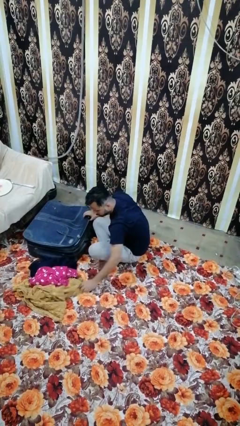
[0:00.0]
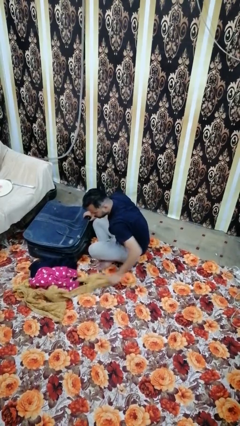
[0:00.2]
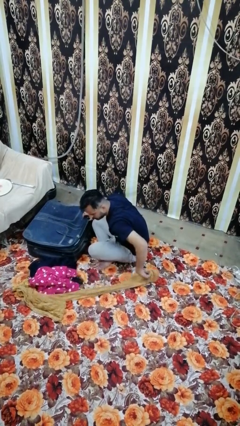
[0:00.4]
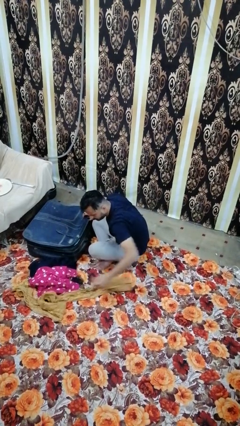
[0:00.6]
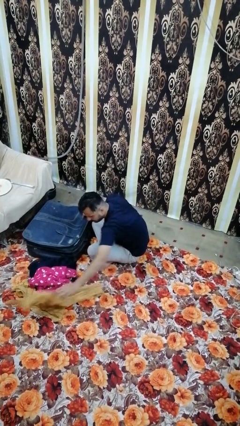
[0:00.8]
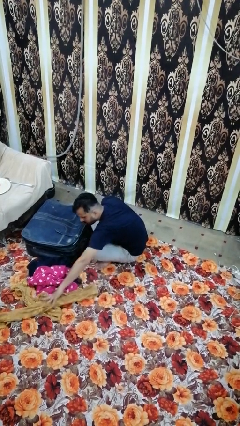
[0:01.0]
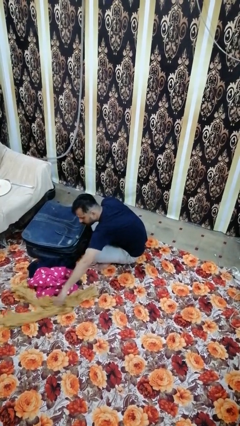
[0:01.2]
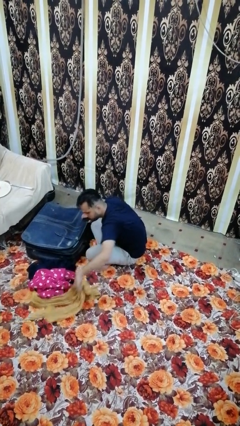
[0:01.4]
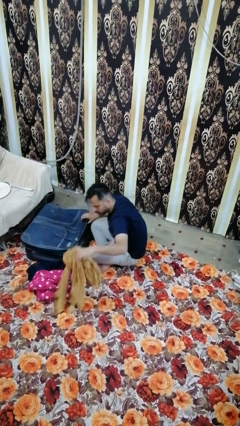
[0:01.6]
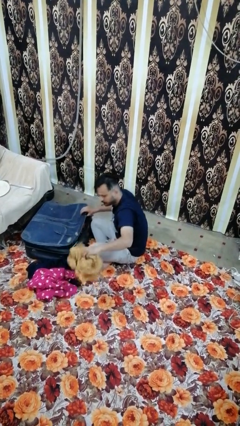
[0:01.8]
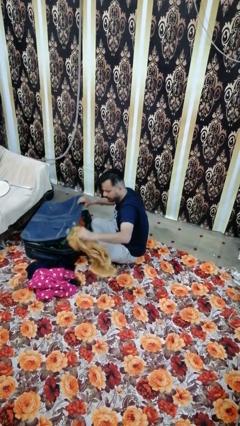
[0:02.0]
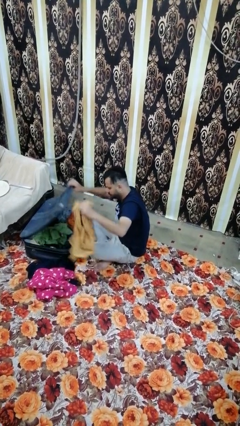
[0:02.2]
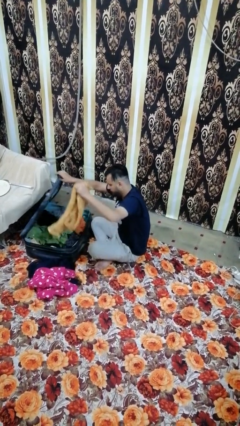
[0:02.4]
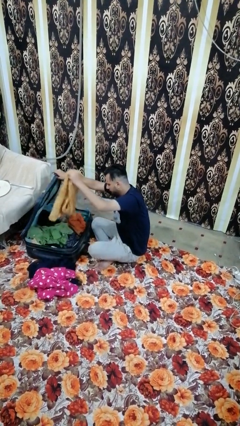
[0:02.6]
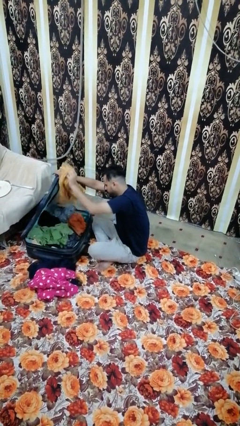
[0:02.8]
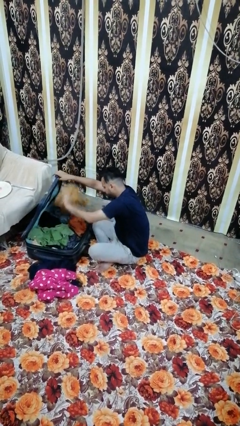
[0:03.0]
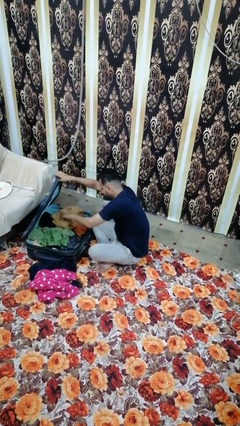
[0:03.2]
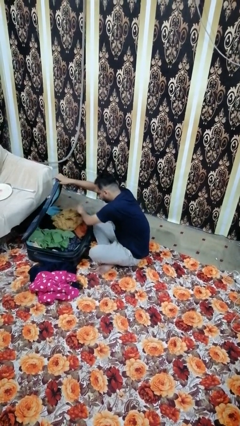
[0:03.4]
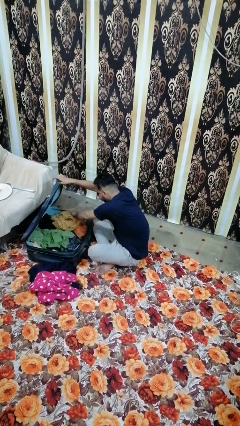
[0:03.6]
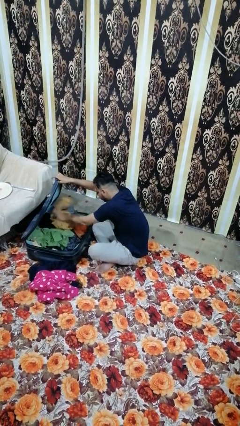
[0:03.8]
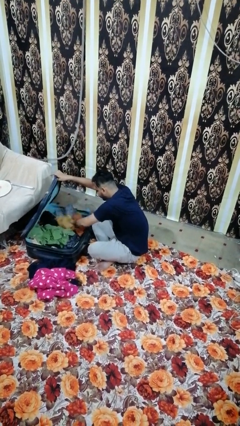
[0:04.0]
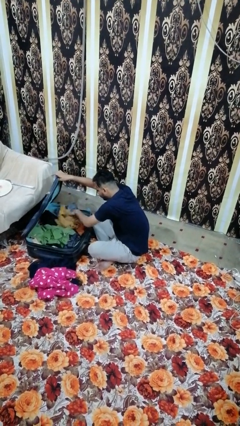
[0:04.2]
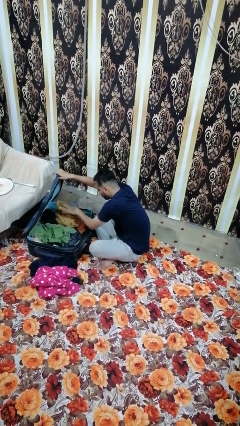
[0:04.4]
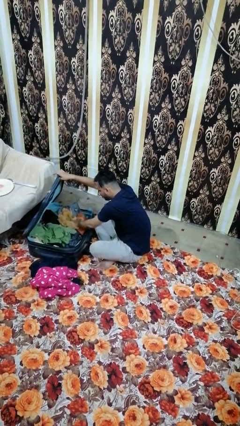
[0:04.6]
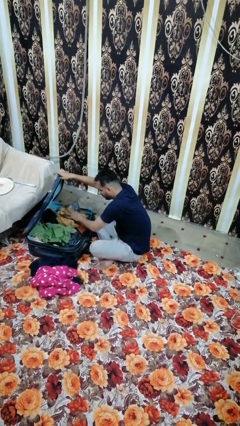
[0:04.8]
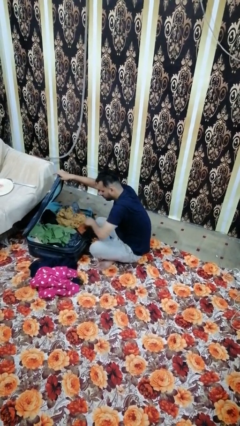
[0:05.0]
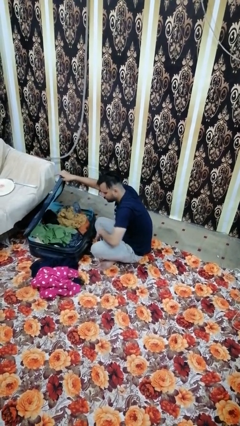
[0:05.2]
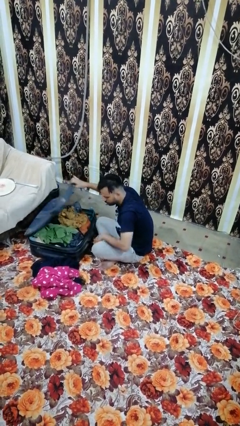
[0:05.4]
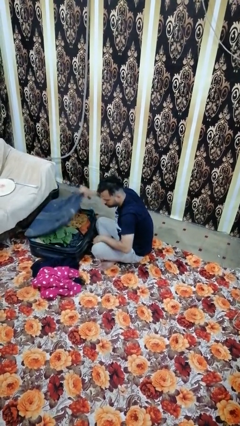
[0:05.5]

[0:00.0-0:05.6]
person loads clothes into suitcase

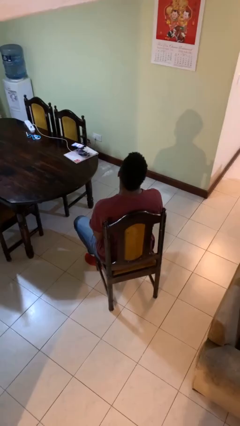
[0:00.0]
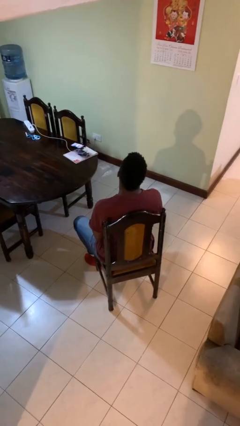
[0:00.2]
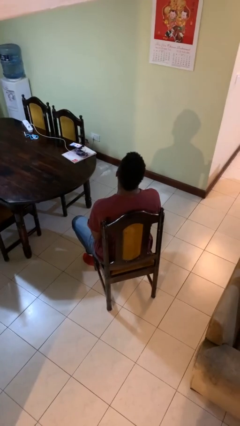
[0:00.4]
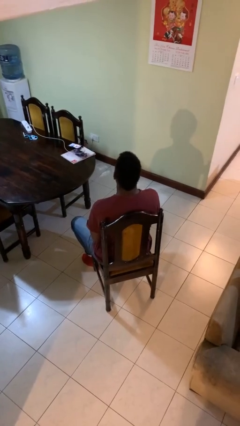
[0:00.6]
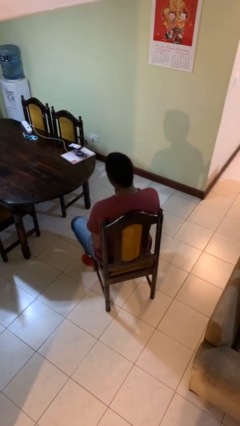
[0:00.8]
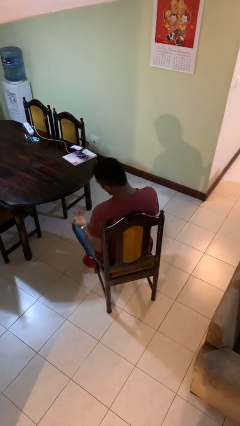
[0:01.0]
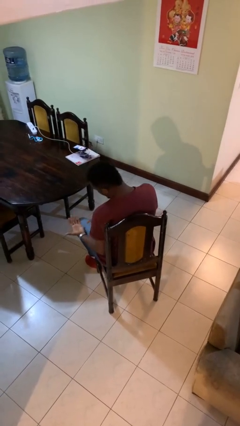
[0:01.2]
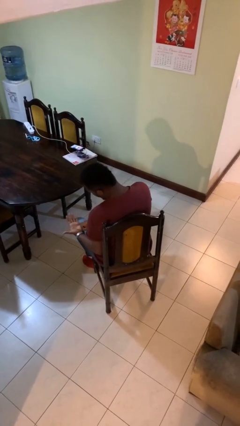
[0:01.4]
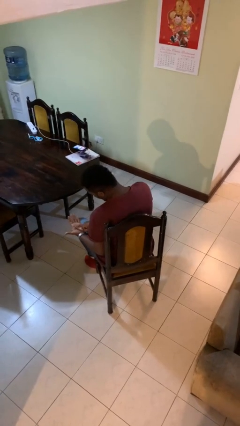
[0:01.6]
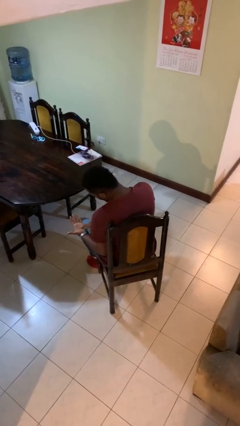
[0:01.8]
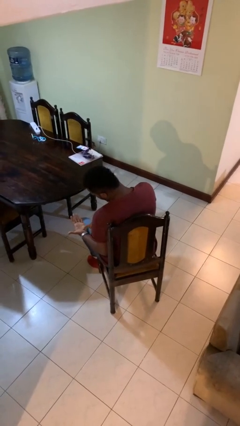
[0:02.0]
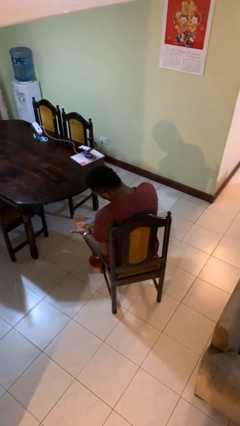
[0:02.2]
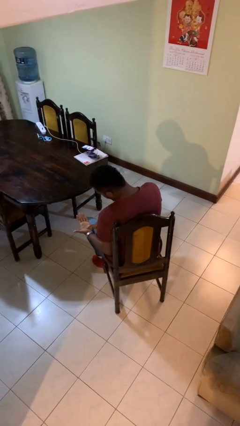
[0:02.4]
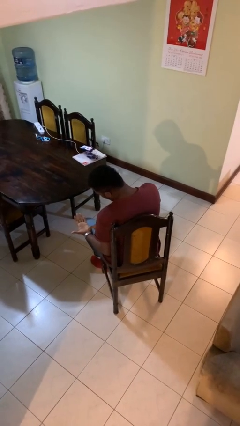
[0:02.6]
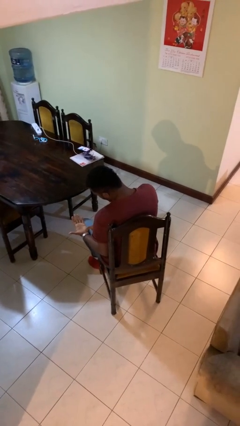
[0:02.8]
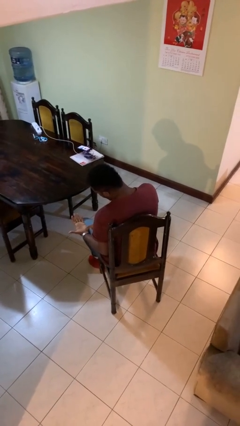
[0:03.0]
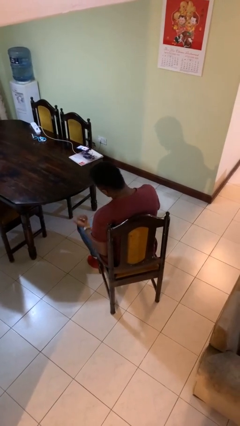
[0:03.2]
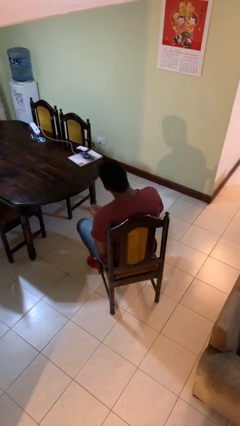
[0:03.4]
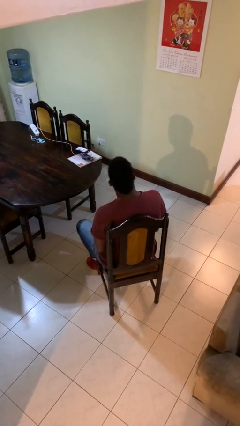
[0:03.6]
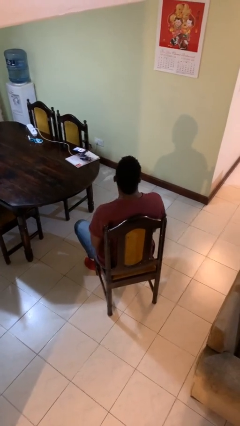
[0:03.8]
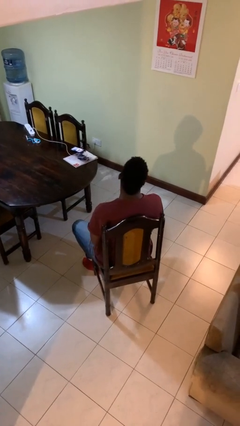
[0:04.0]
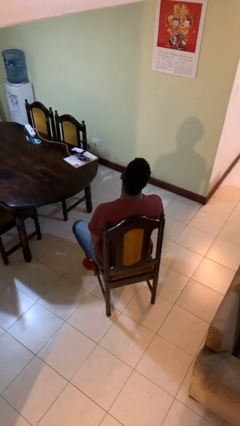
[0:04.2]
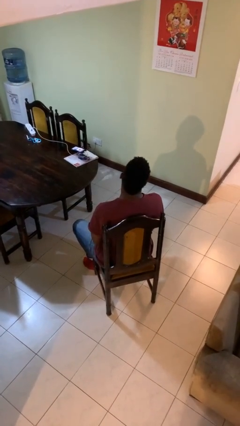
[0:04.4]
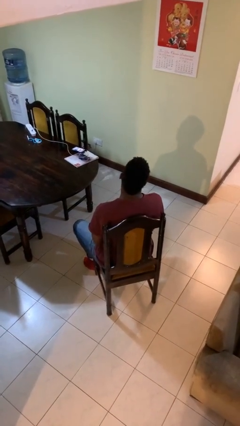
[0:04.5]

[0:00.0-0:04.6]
person looks at hands in lap

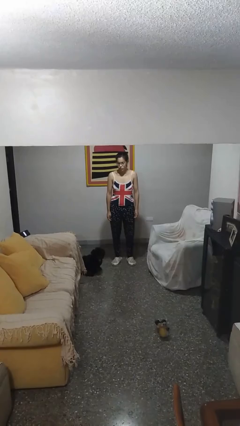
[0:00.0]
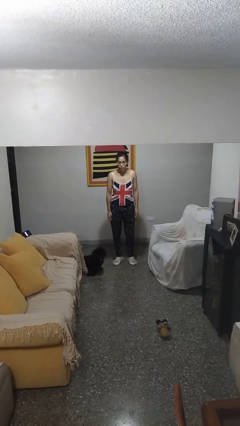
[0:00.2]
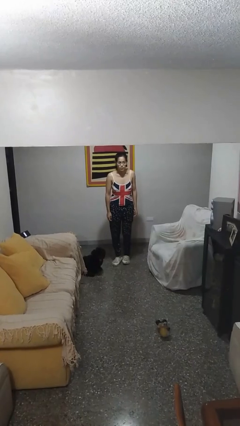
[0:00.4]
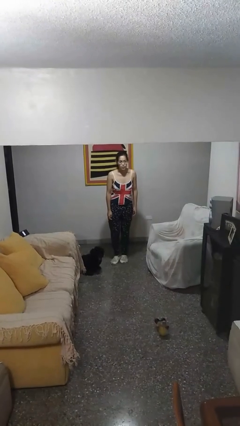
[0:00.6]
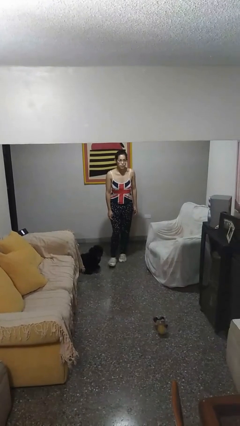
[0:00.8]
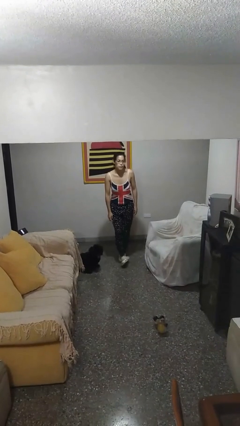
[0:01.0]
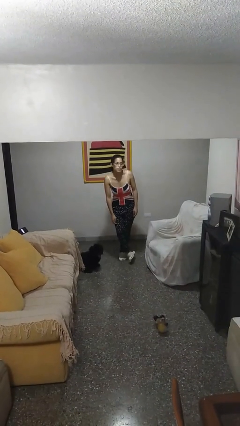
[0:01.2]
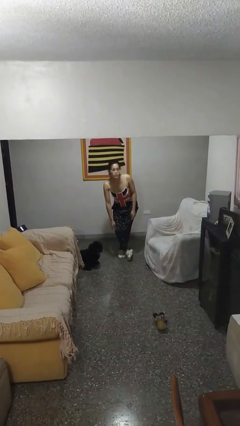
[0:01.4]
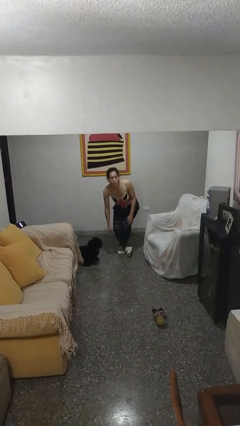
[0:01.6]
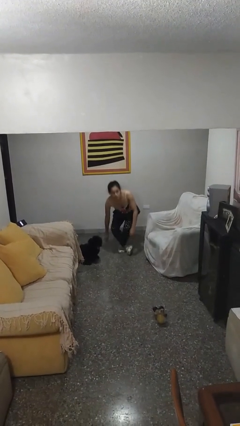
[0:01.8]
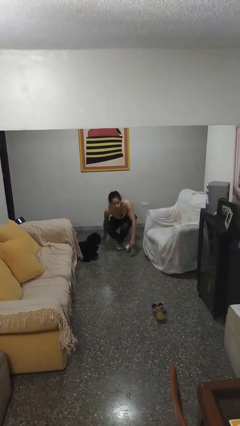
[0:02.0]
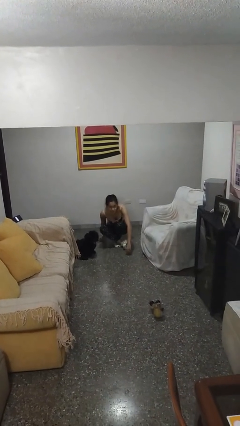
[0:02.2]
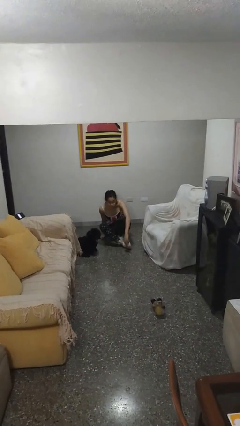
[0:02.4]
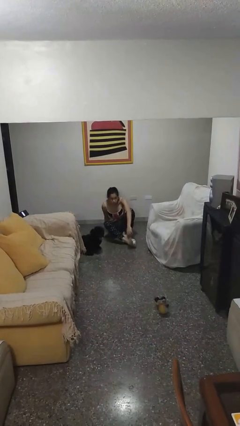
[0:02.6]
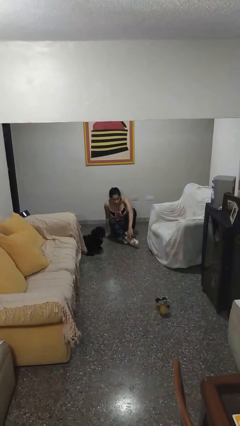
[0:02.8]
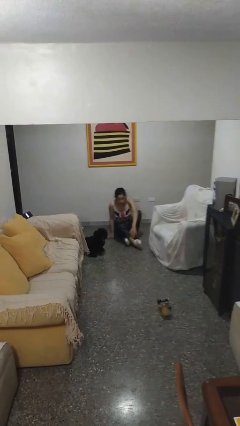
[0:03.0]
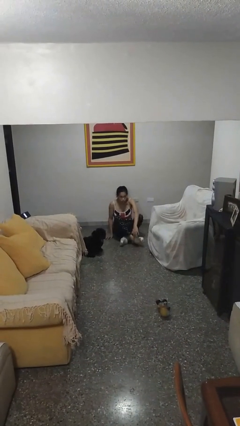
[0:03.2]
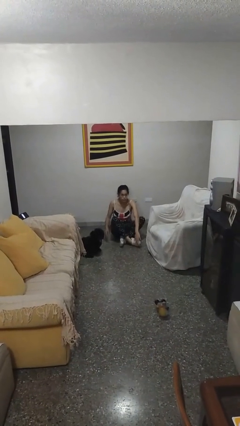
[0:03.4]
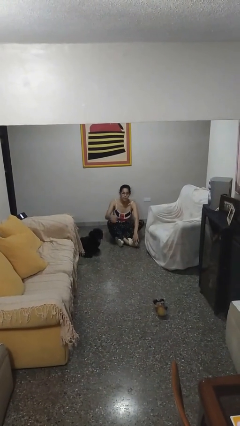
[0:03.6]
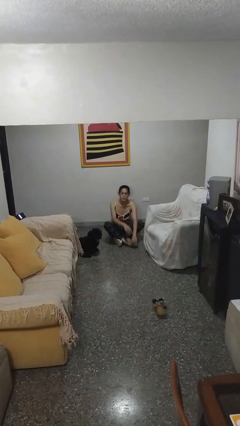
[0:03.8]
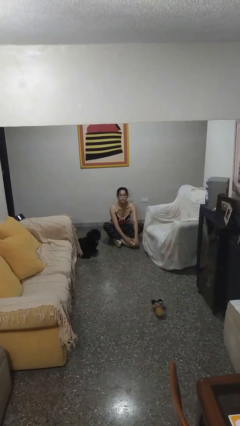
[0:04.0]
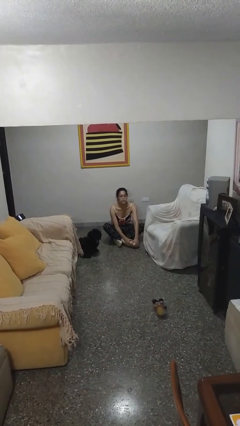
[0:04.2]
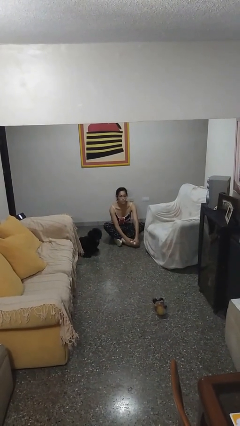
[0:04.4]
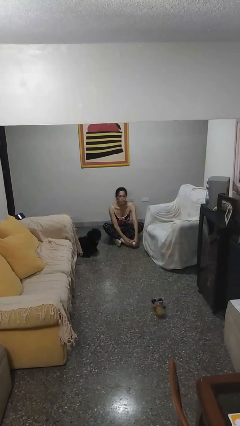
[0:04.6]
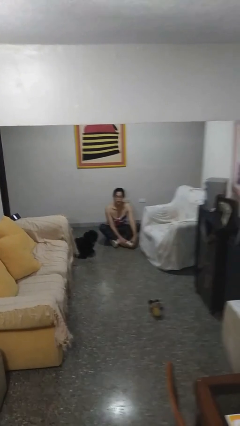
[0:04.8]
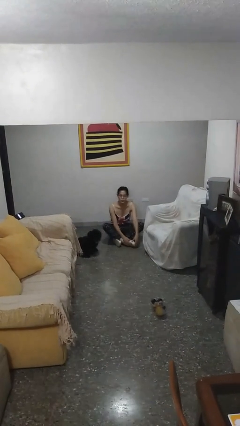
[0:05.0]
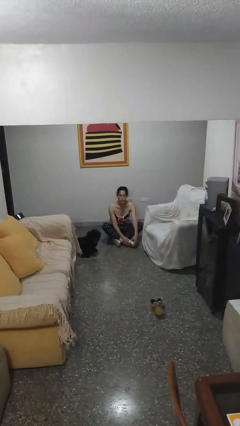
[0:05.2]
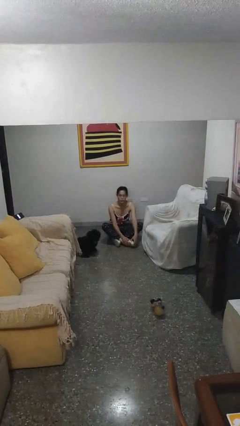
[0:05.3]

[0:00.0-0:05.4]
person sits crisscross

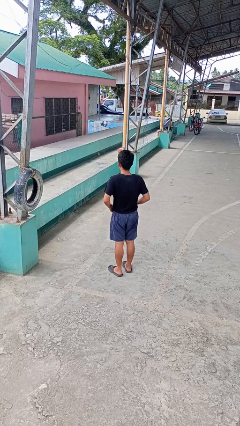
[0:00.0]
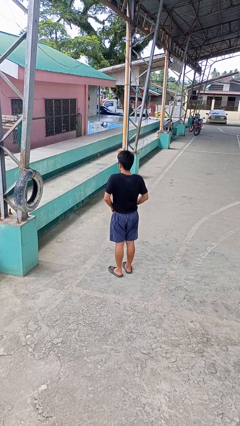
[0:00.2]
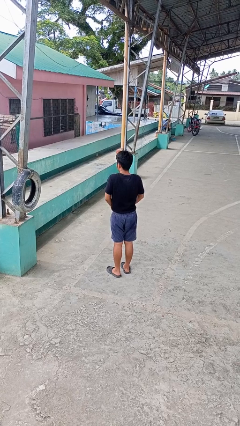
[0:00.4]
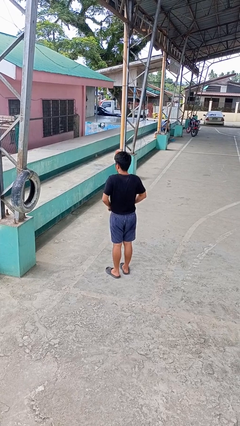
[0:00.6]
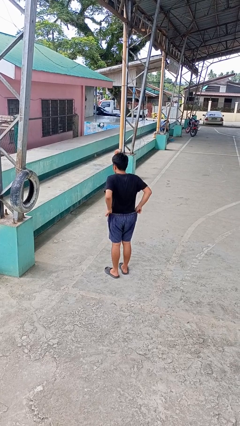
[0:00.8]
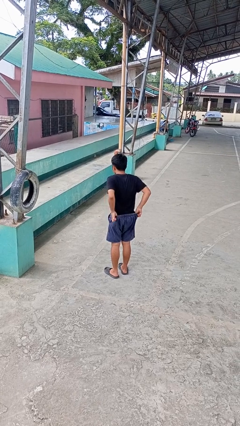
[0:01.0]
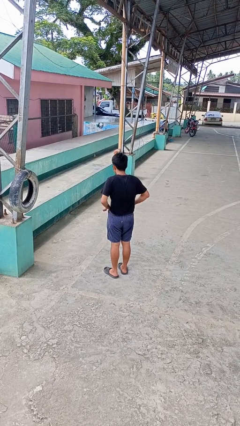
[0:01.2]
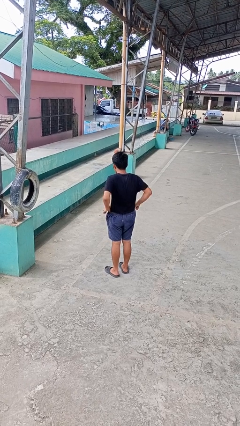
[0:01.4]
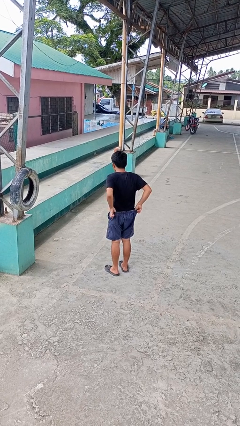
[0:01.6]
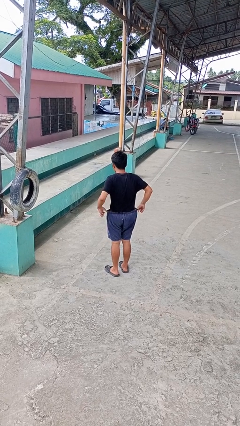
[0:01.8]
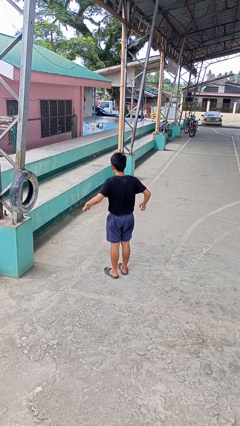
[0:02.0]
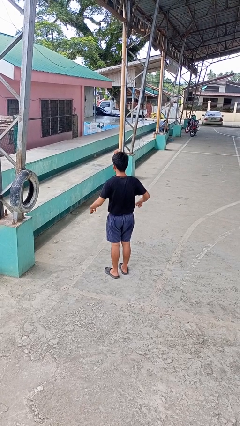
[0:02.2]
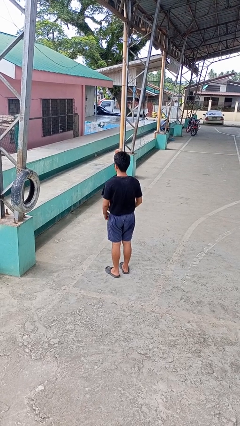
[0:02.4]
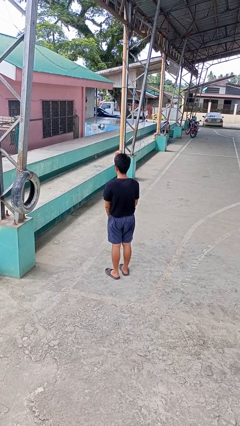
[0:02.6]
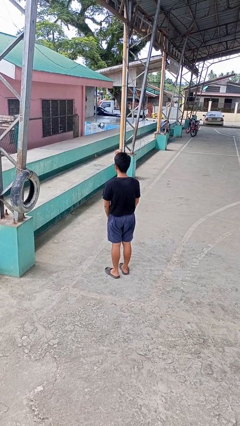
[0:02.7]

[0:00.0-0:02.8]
person hikes up pants
